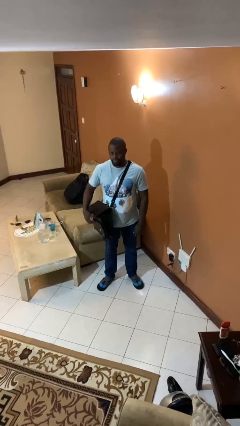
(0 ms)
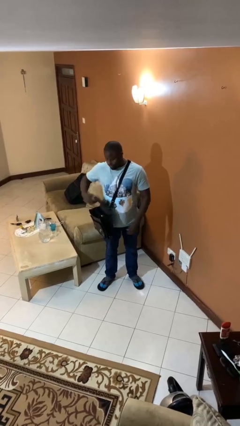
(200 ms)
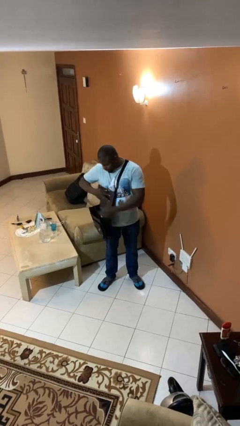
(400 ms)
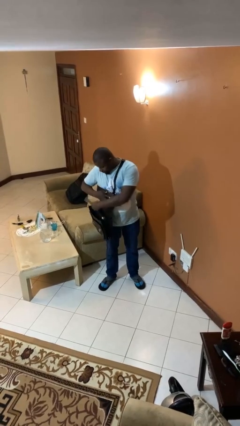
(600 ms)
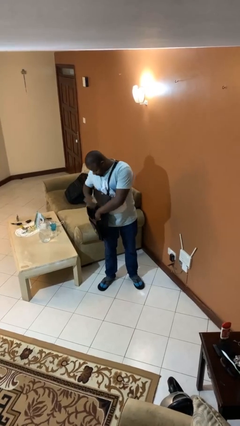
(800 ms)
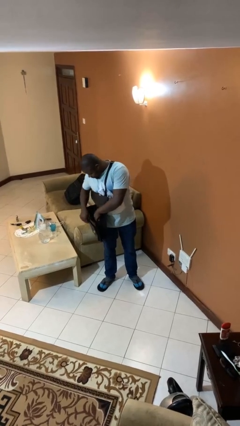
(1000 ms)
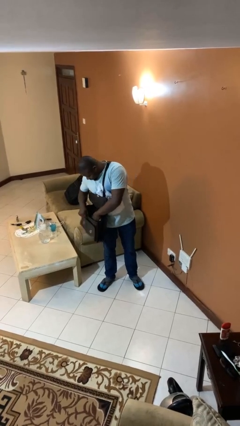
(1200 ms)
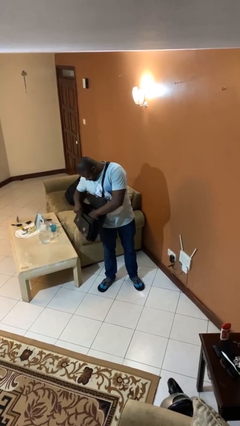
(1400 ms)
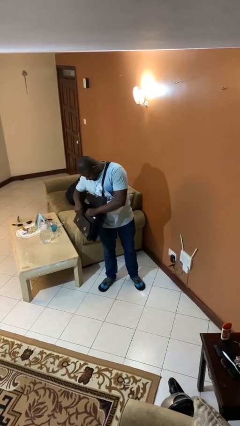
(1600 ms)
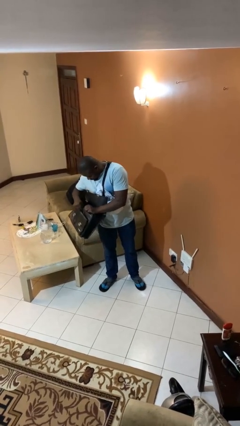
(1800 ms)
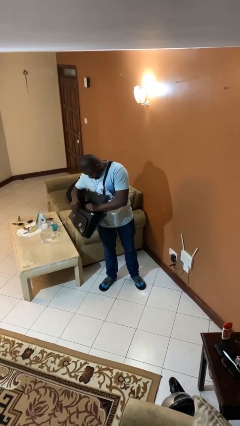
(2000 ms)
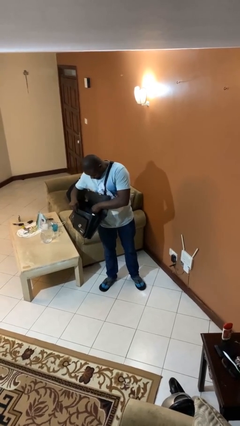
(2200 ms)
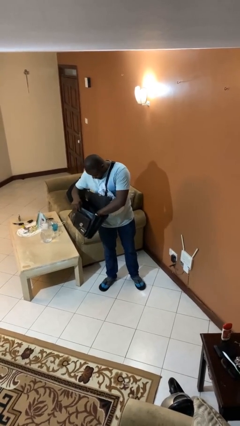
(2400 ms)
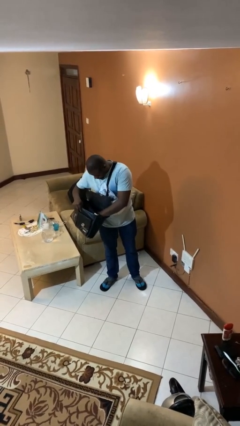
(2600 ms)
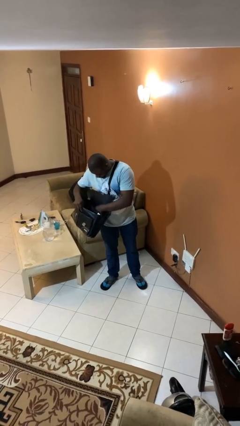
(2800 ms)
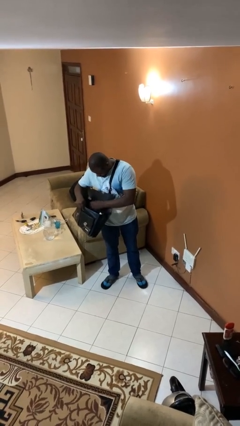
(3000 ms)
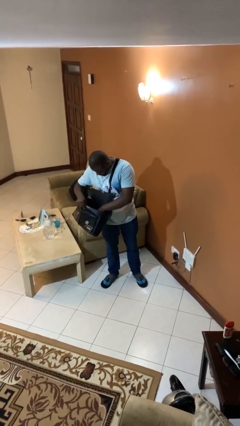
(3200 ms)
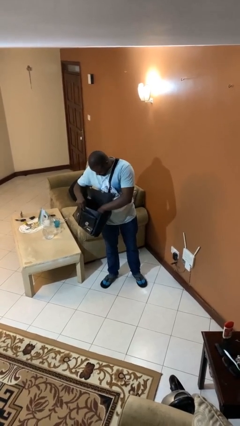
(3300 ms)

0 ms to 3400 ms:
person searches in purse

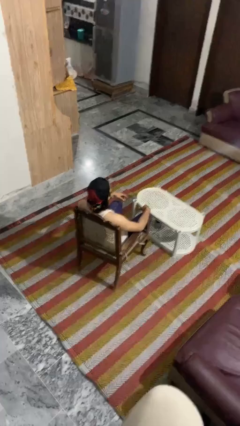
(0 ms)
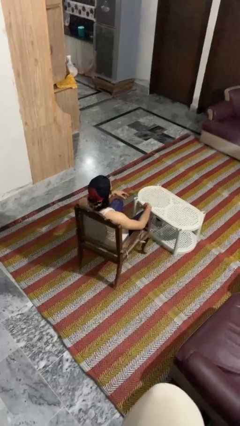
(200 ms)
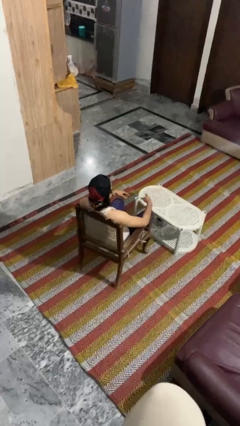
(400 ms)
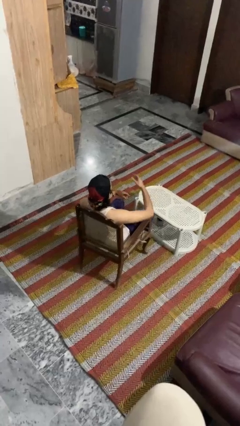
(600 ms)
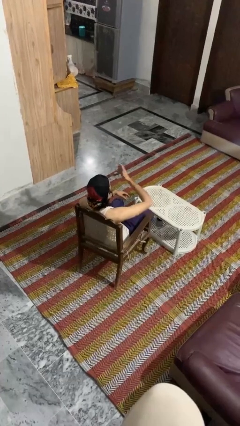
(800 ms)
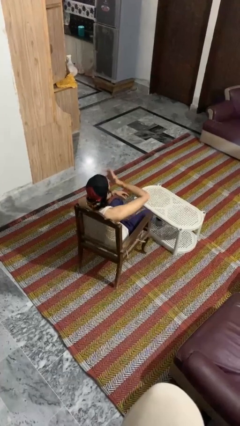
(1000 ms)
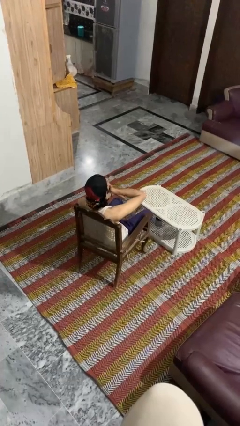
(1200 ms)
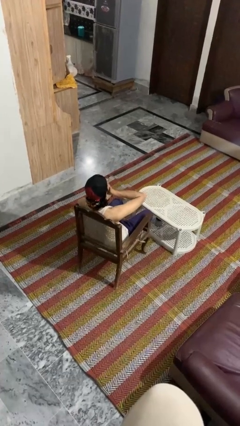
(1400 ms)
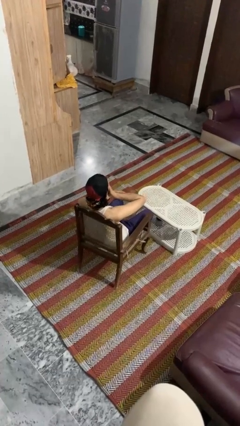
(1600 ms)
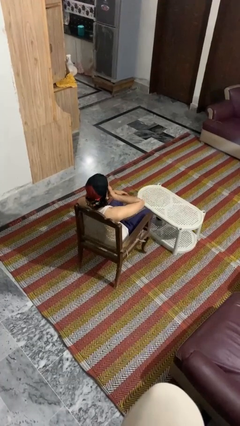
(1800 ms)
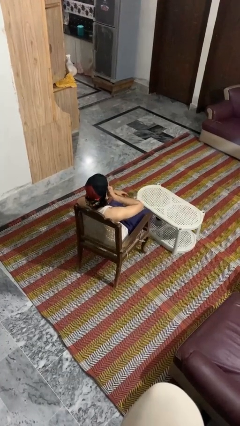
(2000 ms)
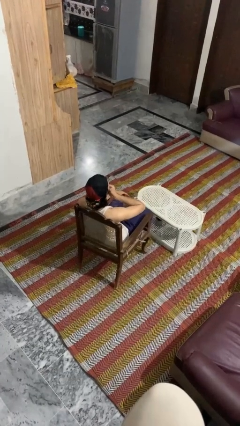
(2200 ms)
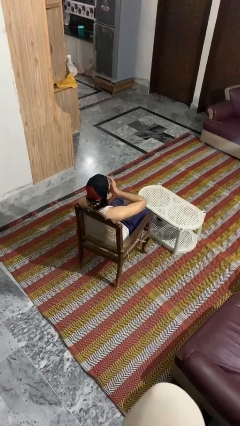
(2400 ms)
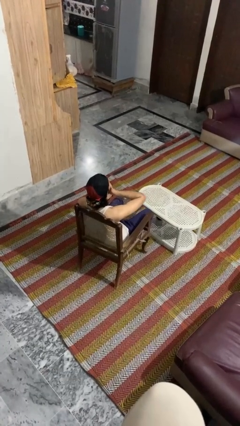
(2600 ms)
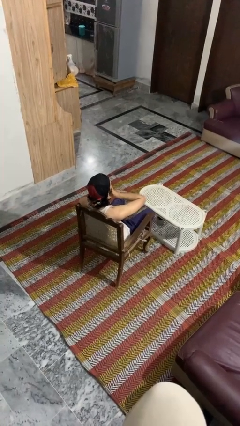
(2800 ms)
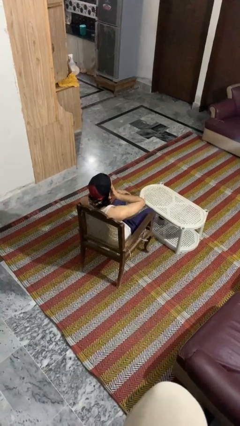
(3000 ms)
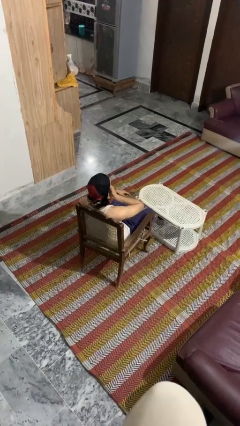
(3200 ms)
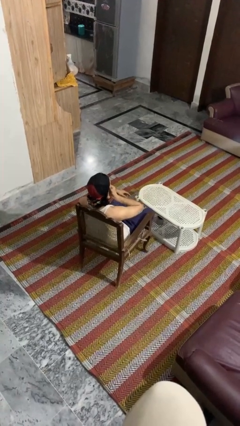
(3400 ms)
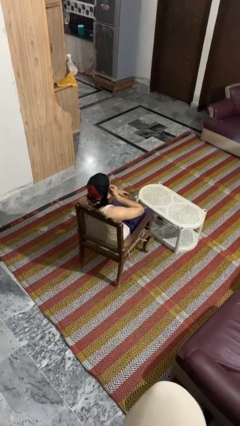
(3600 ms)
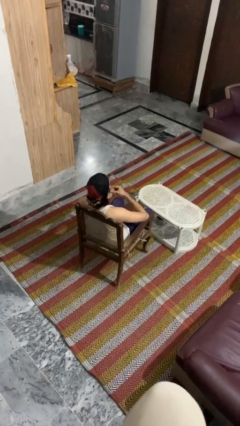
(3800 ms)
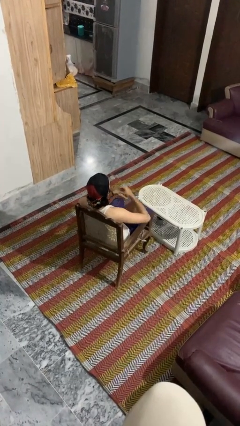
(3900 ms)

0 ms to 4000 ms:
person strokes chin

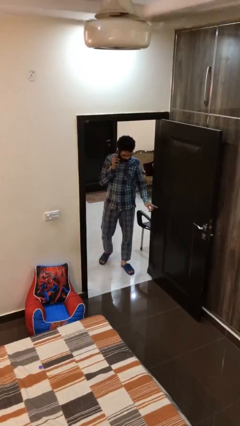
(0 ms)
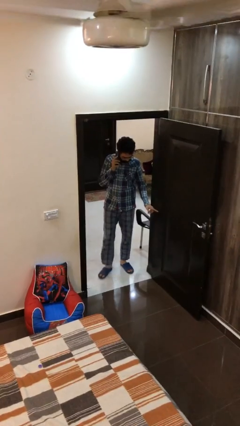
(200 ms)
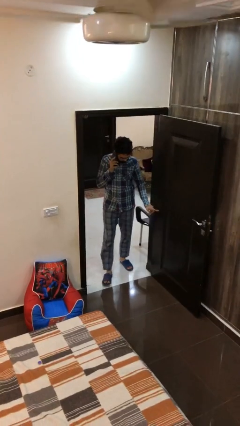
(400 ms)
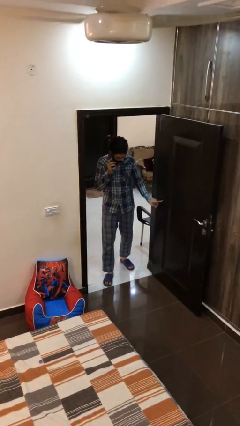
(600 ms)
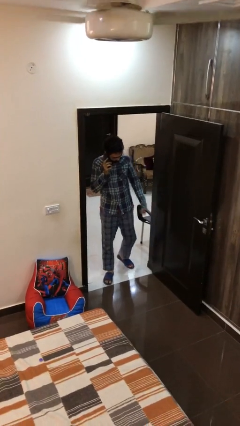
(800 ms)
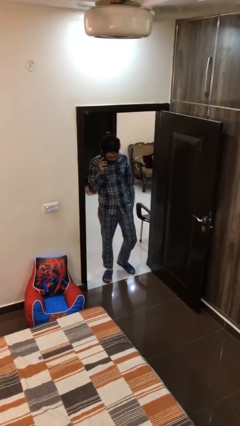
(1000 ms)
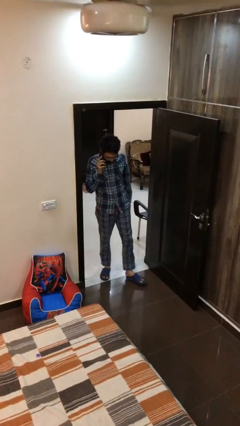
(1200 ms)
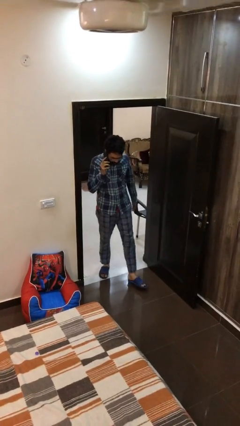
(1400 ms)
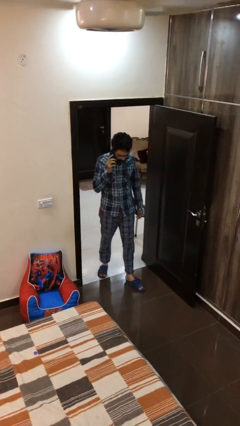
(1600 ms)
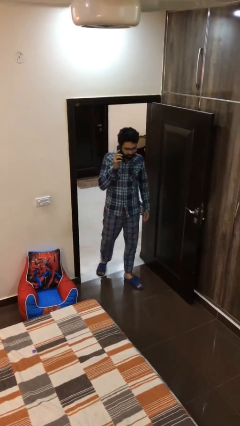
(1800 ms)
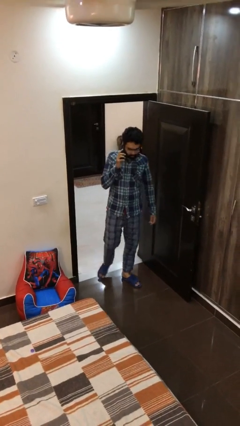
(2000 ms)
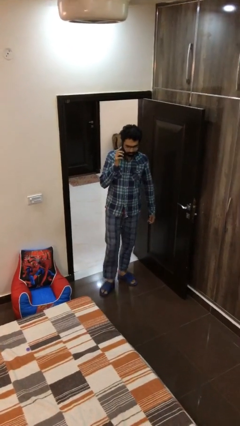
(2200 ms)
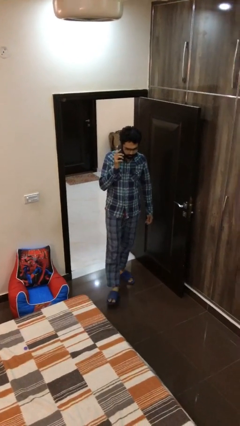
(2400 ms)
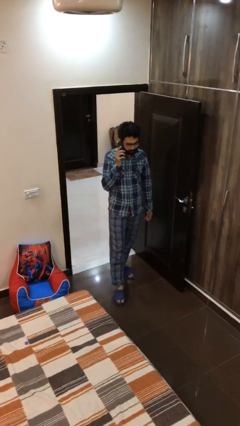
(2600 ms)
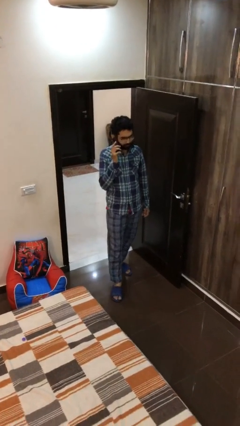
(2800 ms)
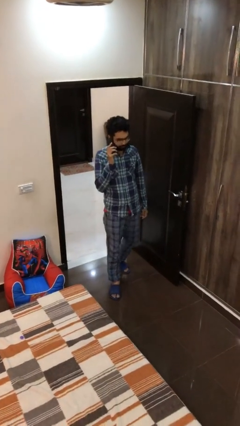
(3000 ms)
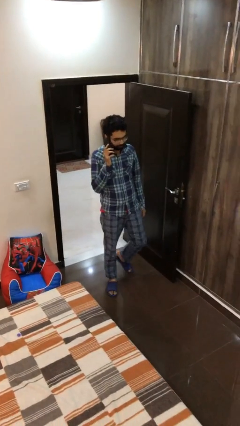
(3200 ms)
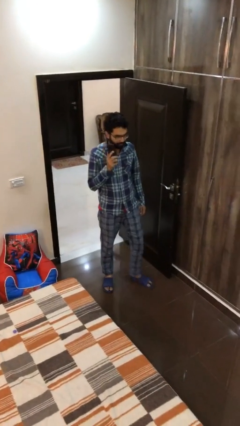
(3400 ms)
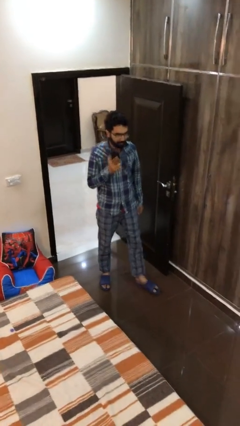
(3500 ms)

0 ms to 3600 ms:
person enters scene through structure

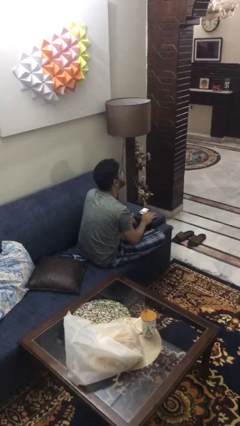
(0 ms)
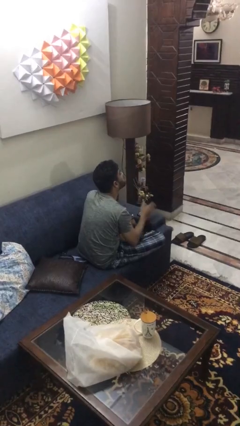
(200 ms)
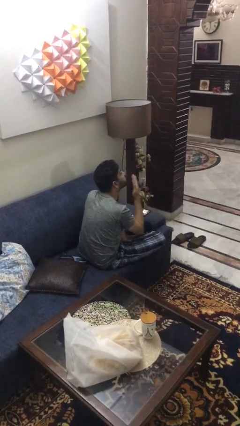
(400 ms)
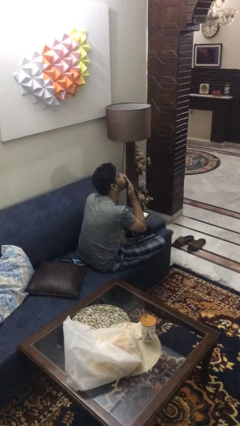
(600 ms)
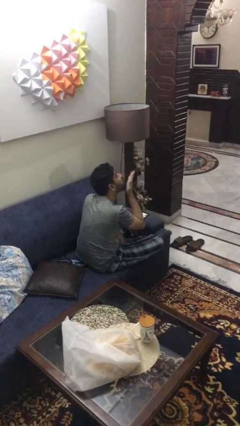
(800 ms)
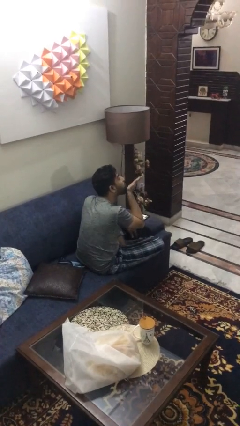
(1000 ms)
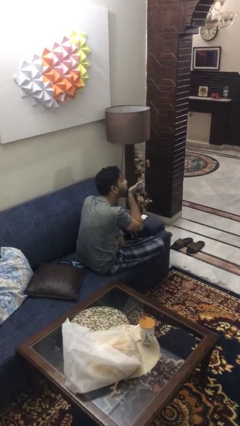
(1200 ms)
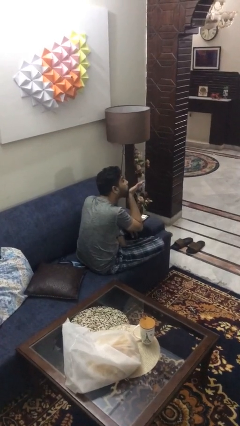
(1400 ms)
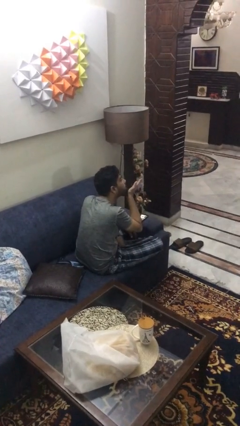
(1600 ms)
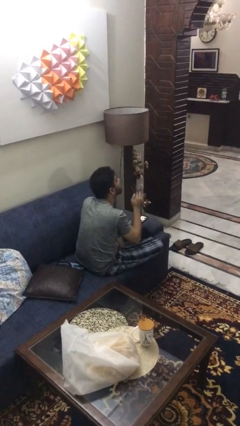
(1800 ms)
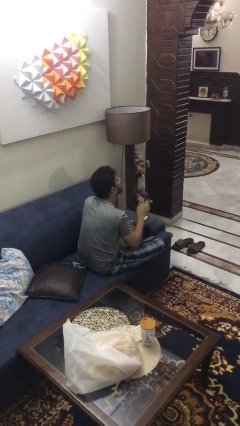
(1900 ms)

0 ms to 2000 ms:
person gestures blow kiss

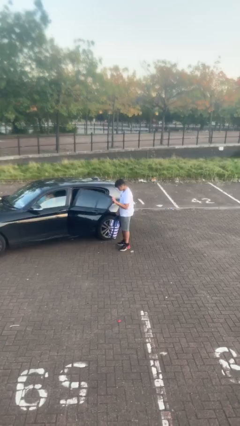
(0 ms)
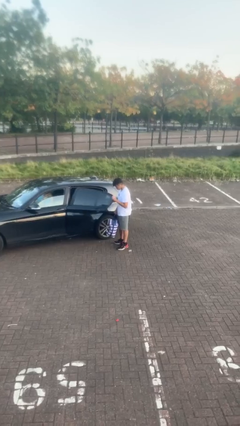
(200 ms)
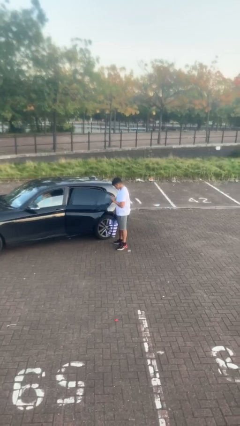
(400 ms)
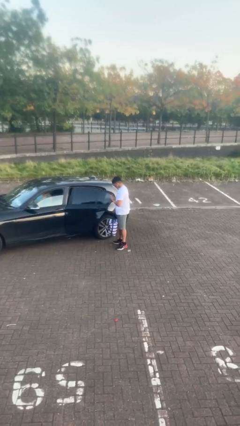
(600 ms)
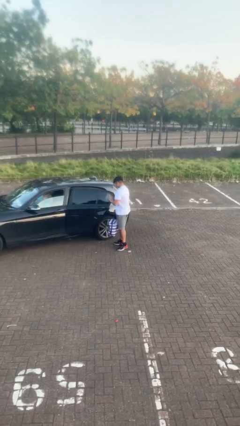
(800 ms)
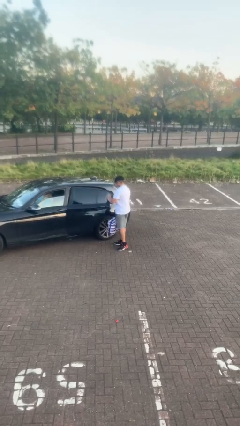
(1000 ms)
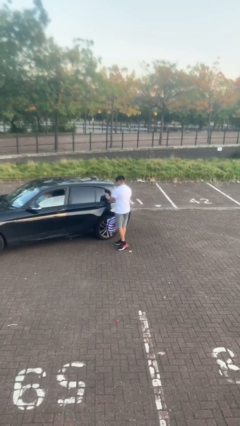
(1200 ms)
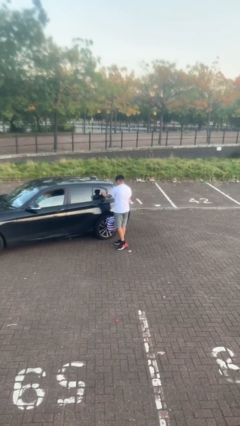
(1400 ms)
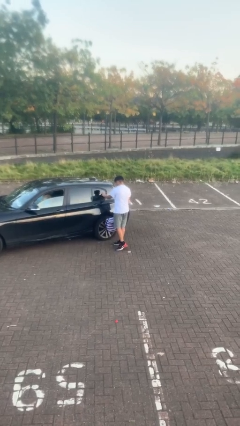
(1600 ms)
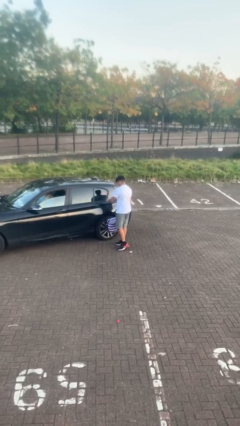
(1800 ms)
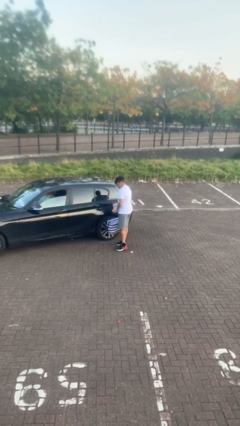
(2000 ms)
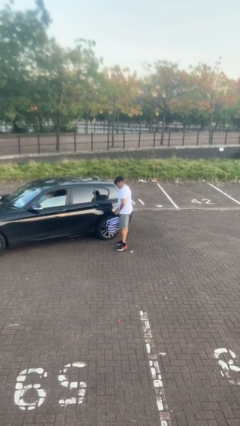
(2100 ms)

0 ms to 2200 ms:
person closes car door

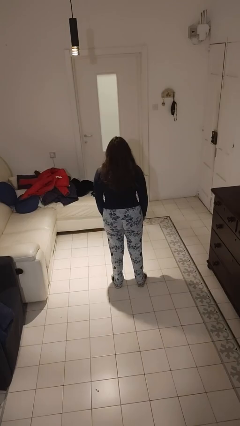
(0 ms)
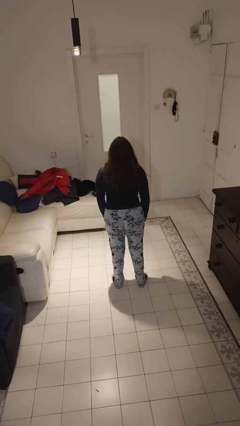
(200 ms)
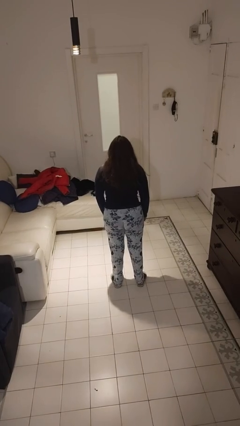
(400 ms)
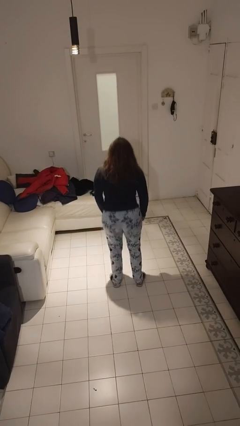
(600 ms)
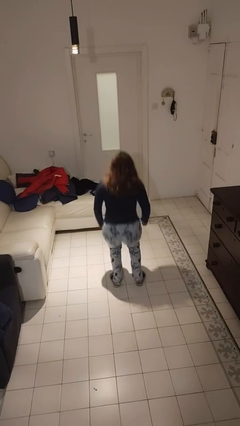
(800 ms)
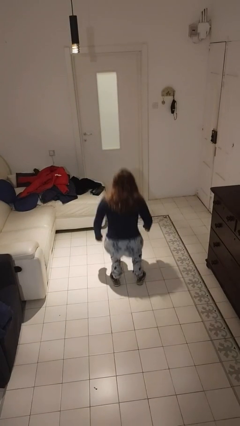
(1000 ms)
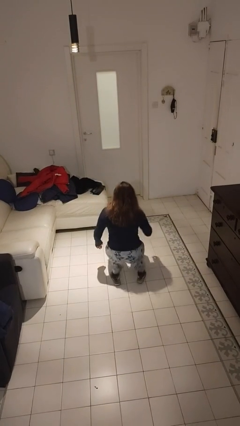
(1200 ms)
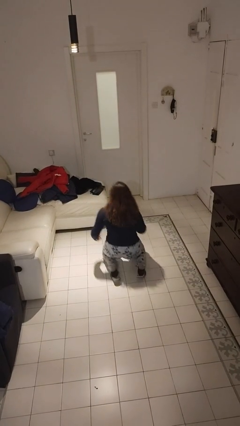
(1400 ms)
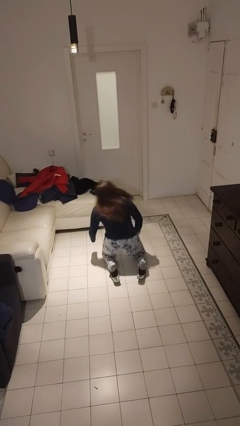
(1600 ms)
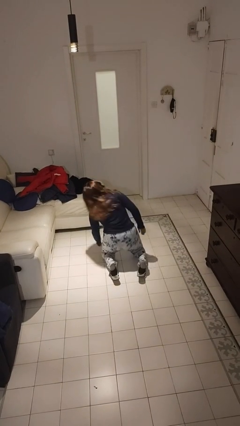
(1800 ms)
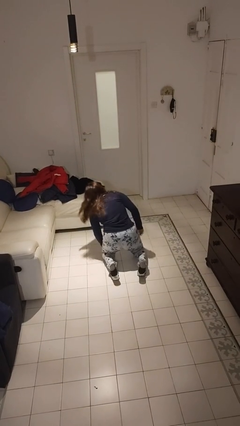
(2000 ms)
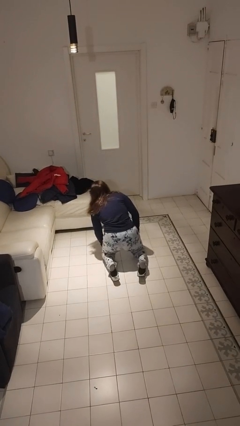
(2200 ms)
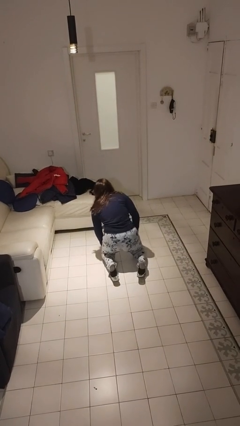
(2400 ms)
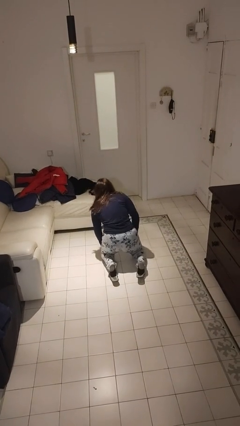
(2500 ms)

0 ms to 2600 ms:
person falls while standing
